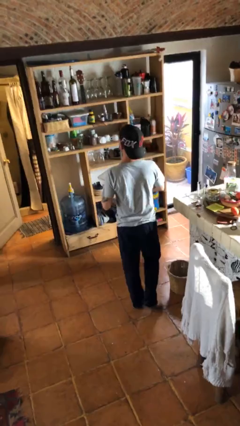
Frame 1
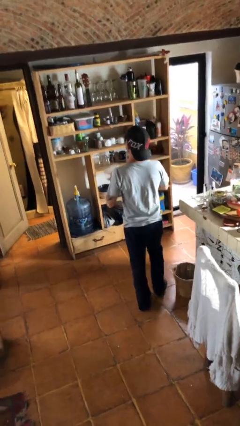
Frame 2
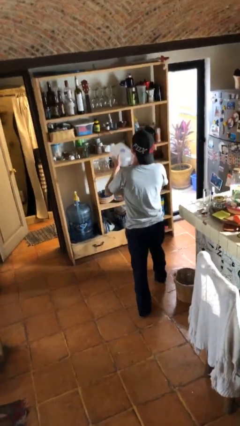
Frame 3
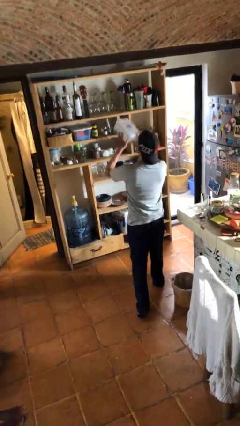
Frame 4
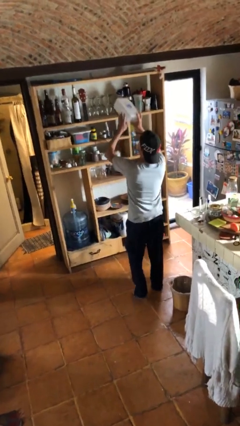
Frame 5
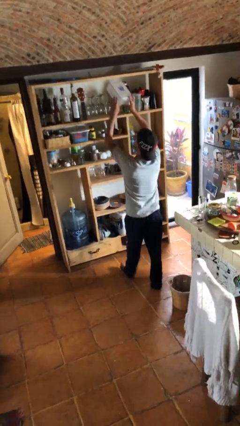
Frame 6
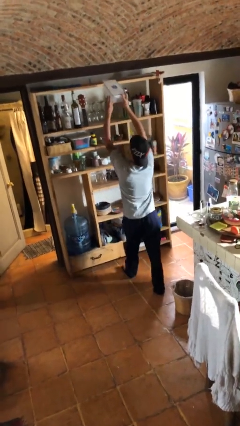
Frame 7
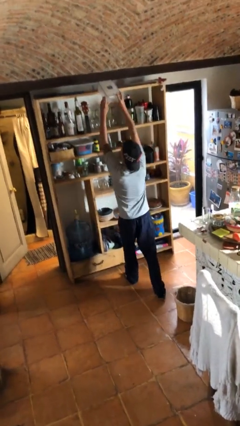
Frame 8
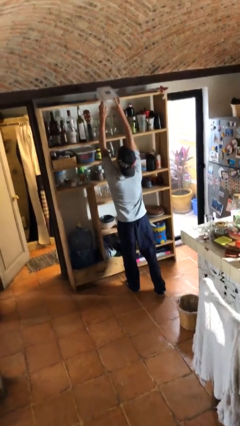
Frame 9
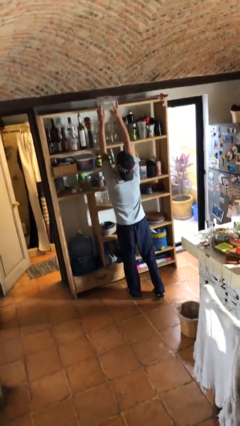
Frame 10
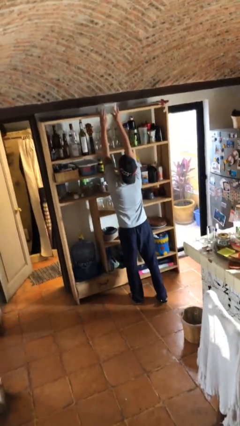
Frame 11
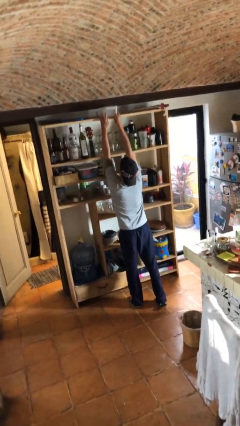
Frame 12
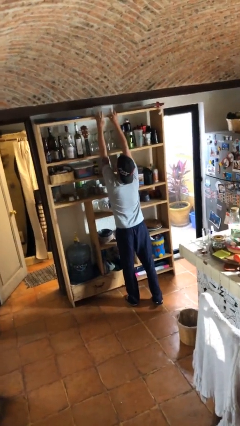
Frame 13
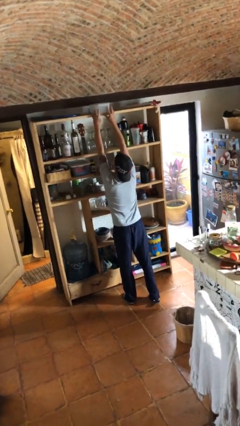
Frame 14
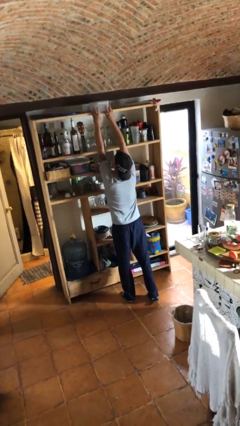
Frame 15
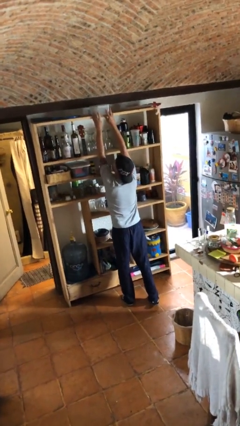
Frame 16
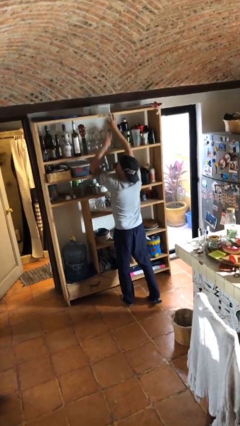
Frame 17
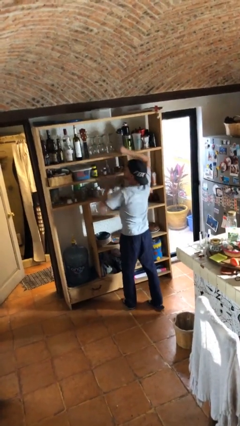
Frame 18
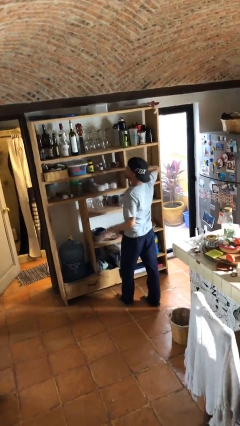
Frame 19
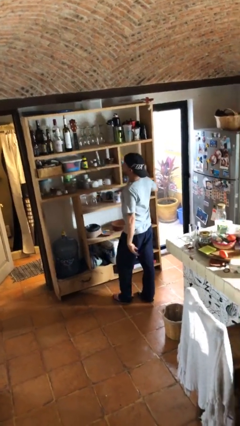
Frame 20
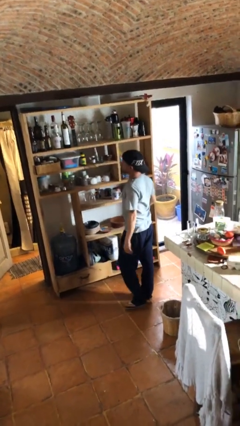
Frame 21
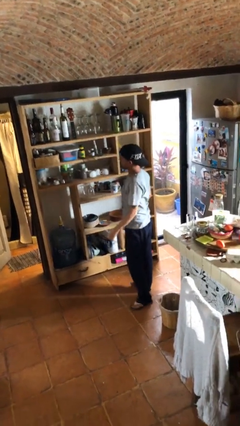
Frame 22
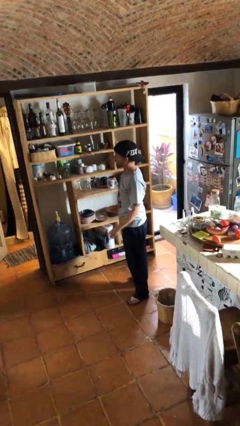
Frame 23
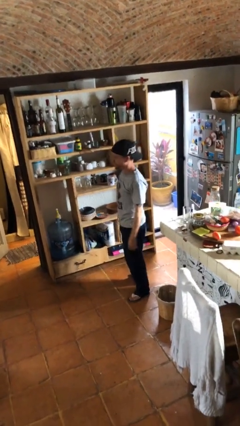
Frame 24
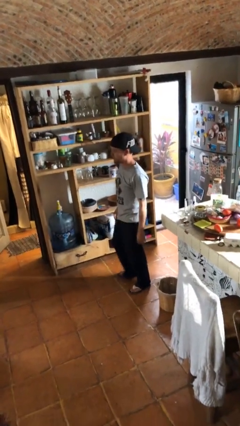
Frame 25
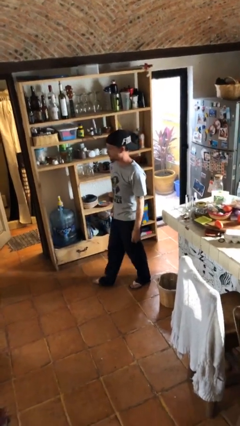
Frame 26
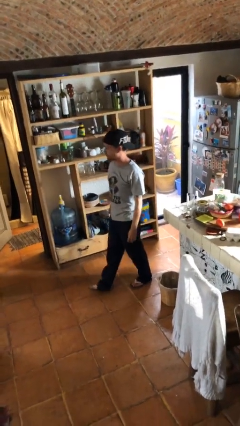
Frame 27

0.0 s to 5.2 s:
person puts down object on shelf

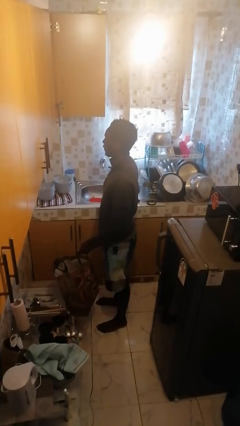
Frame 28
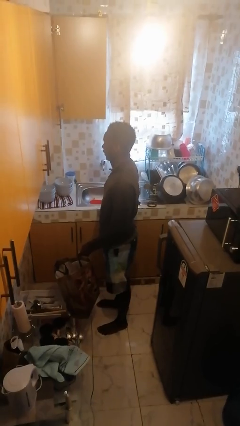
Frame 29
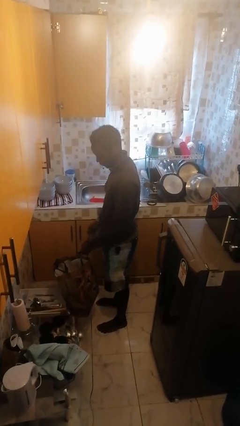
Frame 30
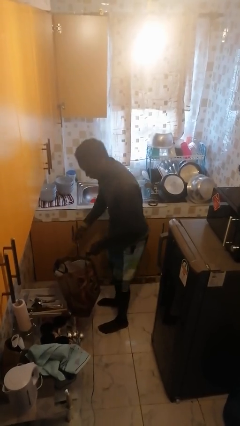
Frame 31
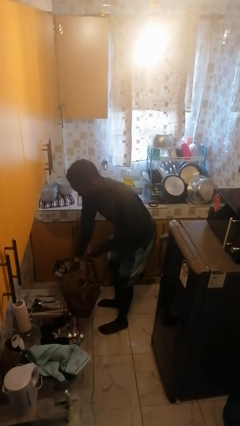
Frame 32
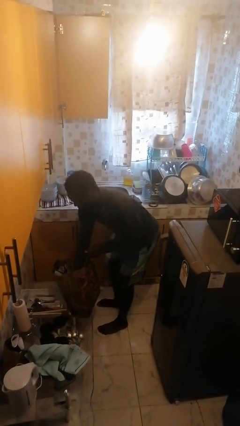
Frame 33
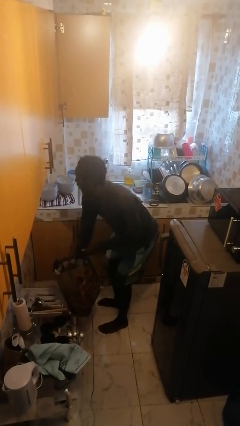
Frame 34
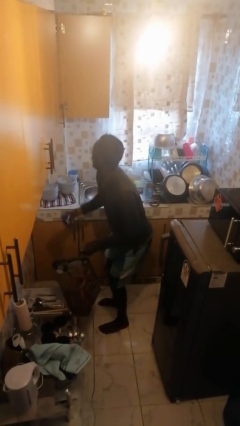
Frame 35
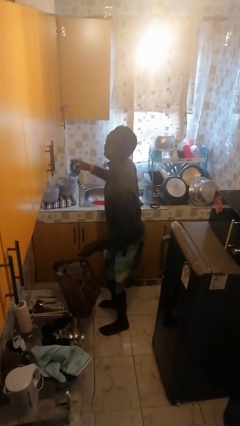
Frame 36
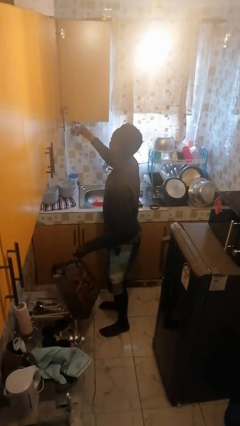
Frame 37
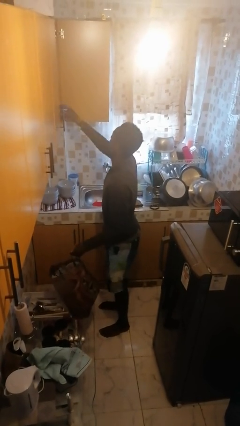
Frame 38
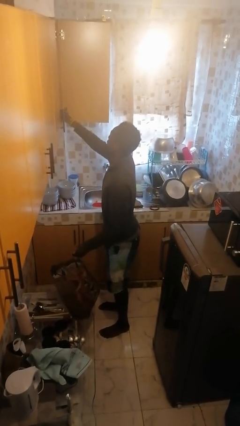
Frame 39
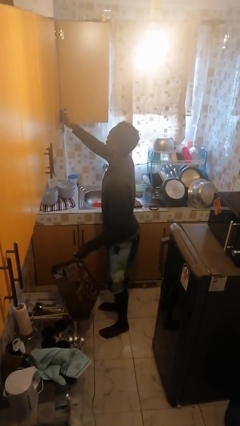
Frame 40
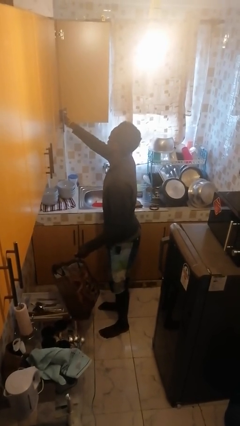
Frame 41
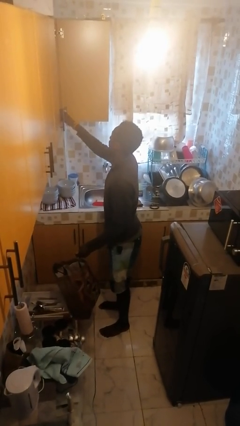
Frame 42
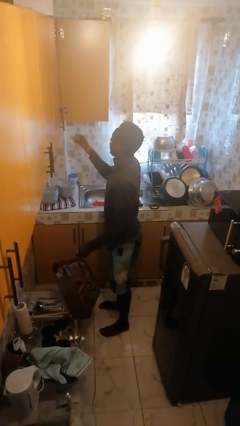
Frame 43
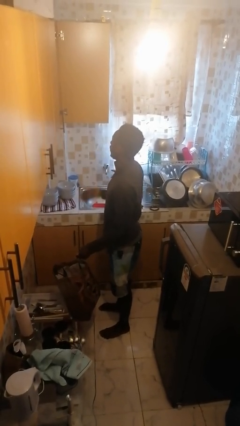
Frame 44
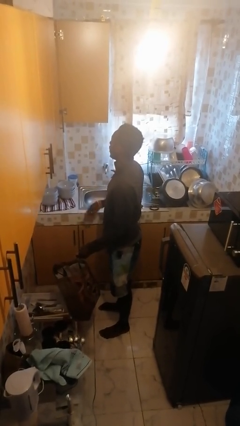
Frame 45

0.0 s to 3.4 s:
person loads groceries into cabinet

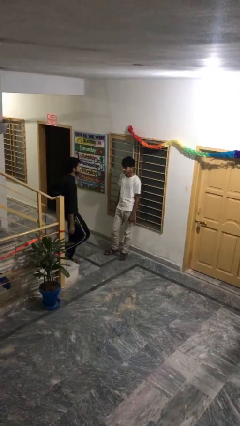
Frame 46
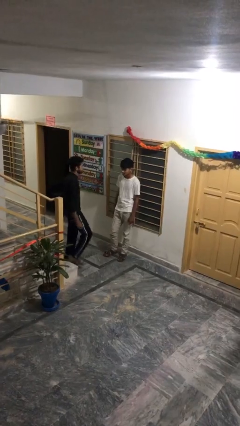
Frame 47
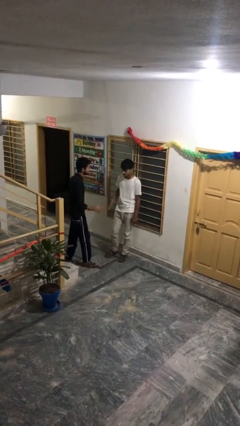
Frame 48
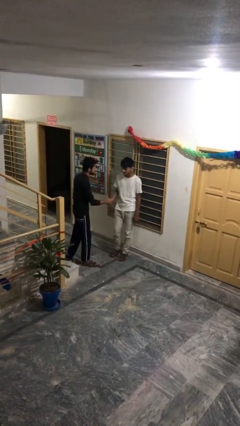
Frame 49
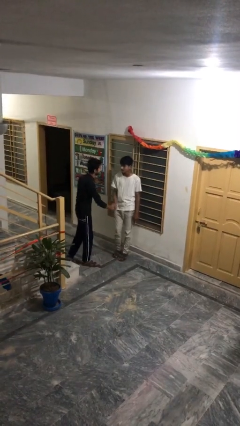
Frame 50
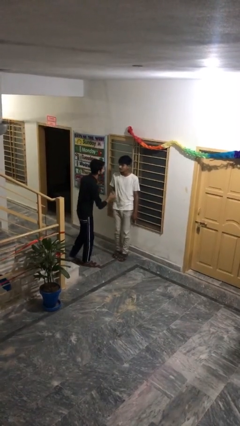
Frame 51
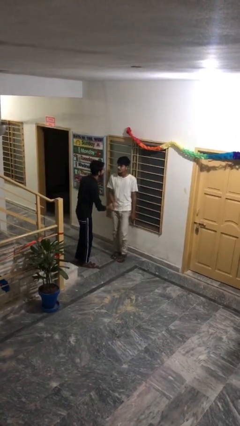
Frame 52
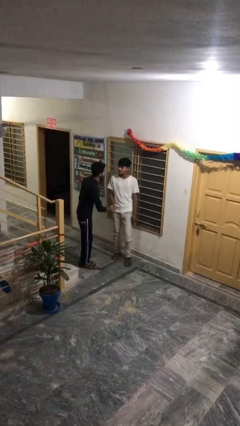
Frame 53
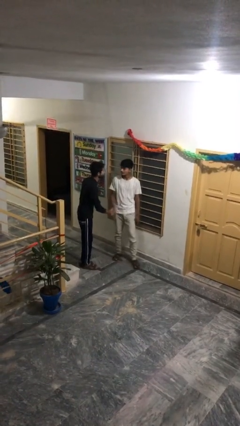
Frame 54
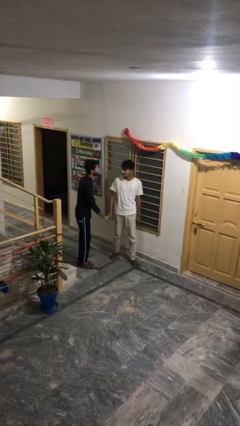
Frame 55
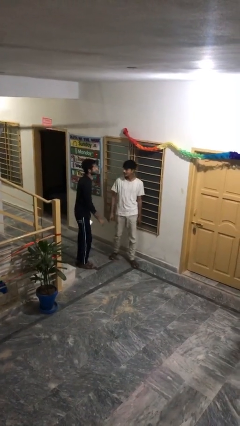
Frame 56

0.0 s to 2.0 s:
person shakes hand

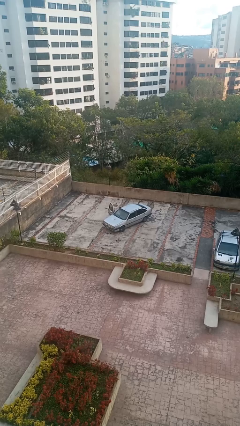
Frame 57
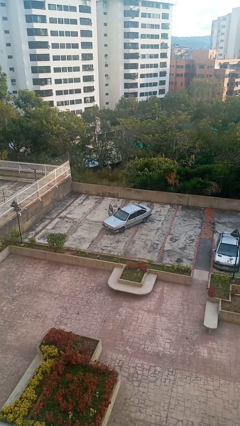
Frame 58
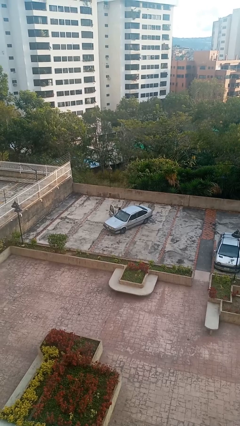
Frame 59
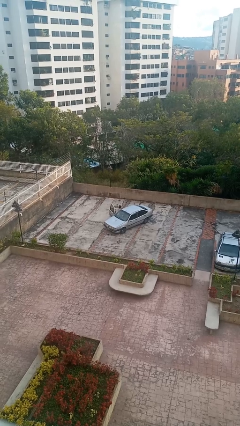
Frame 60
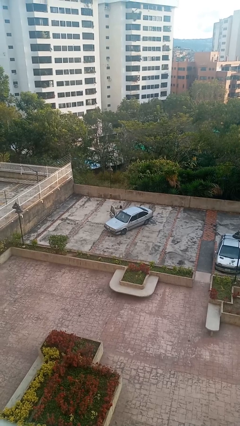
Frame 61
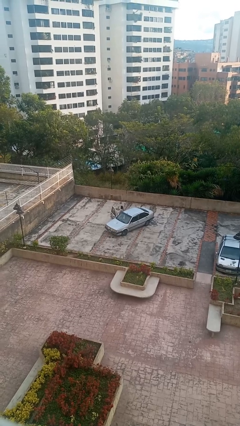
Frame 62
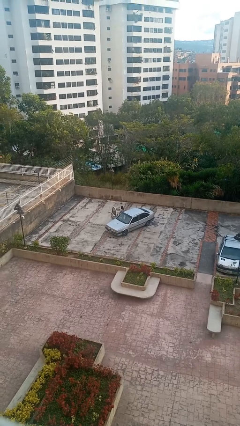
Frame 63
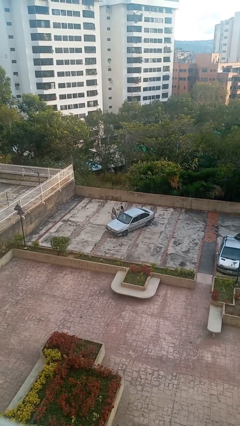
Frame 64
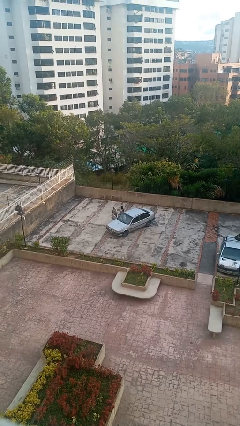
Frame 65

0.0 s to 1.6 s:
person exits car

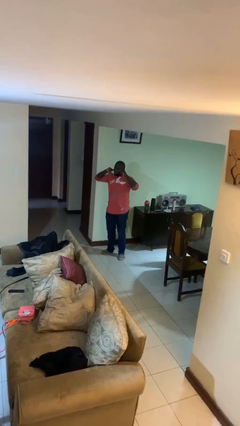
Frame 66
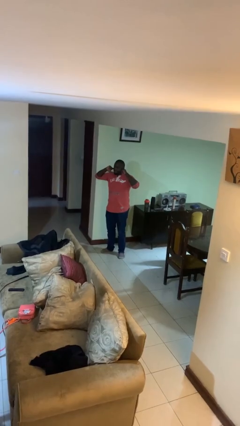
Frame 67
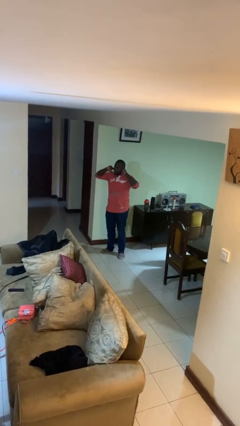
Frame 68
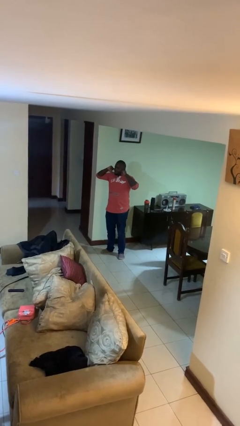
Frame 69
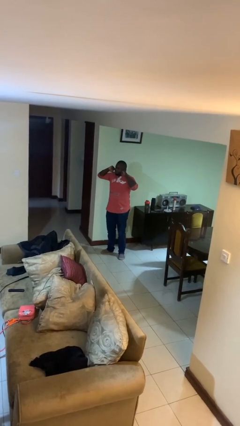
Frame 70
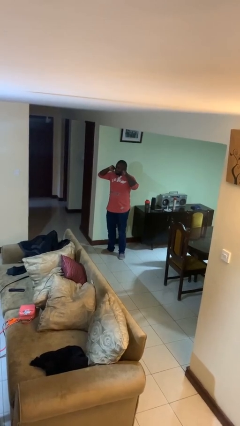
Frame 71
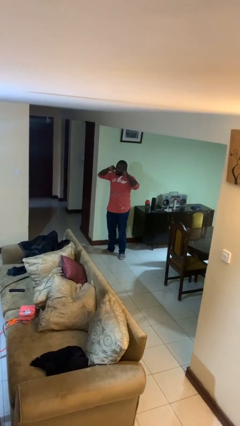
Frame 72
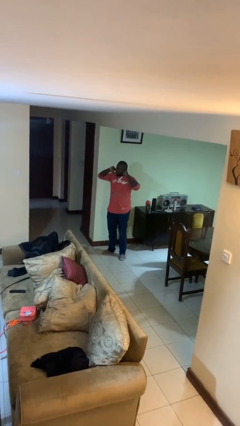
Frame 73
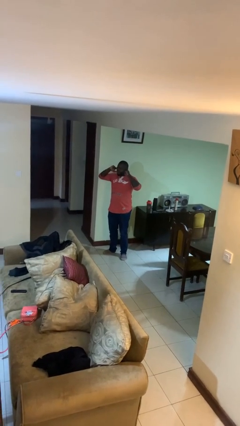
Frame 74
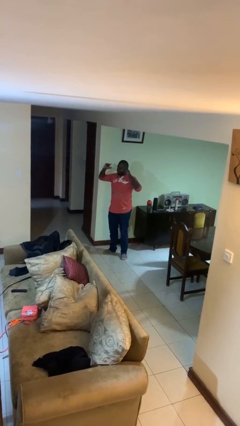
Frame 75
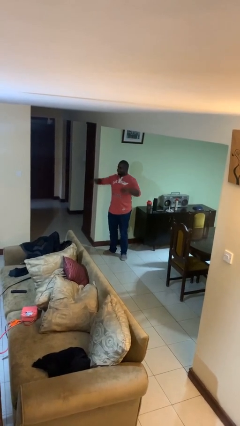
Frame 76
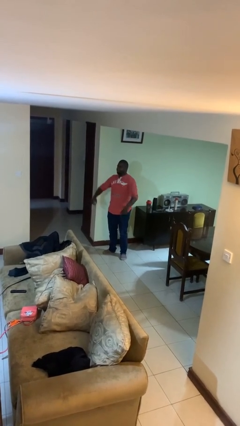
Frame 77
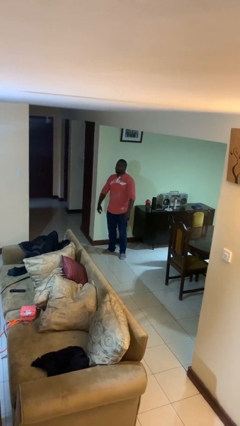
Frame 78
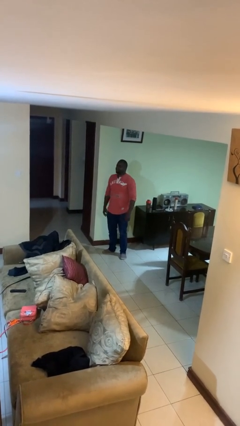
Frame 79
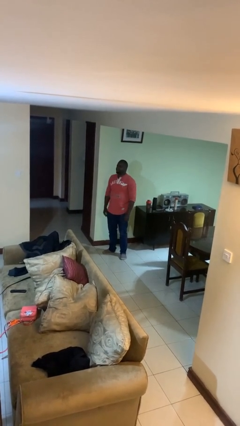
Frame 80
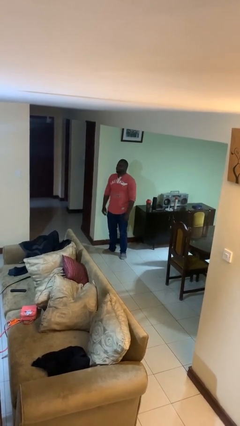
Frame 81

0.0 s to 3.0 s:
person puts fingers in ear

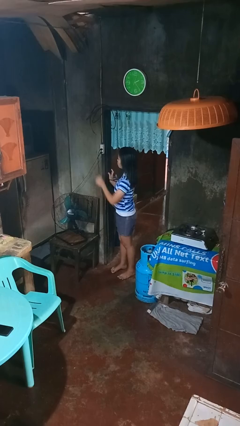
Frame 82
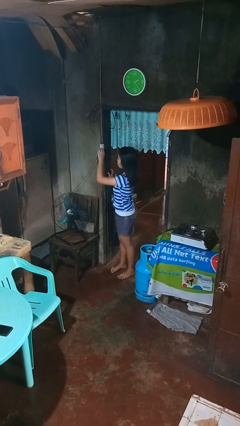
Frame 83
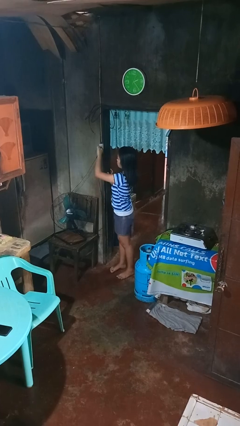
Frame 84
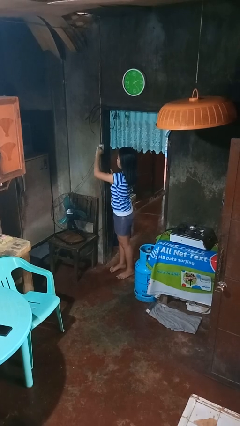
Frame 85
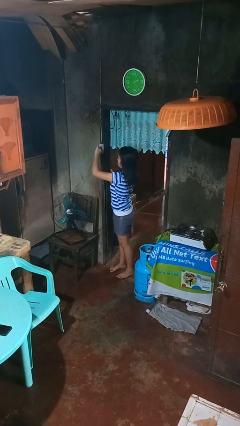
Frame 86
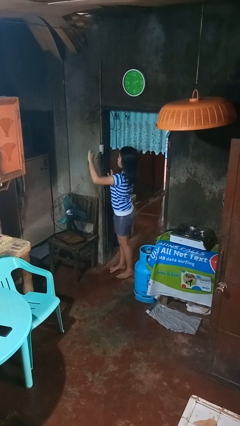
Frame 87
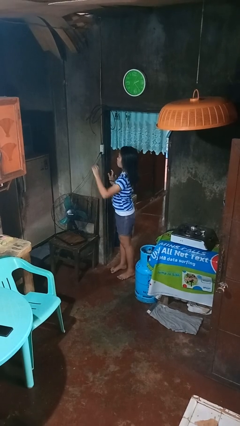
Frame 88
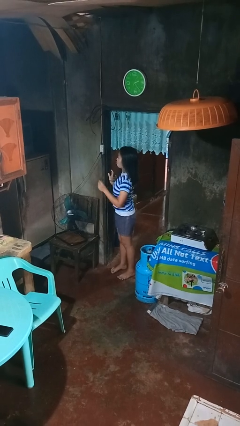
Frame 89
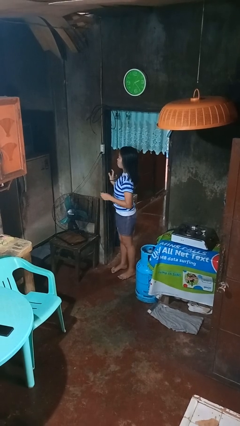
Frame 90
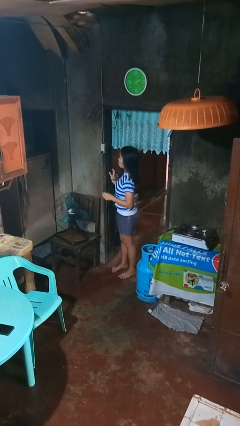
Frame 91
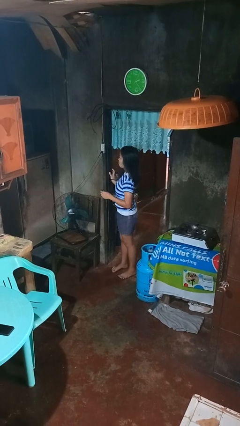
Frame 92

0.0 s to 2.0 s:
person unplugs from electrical socket

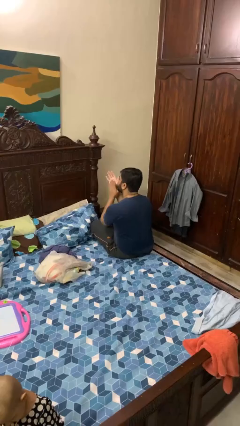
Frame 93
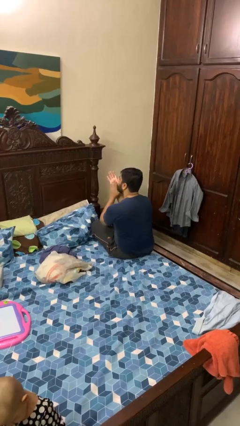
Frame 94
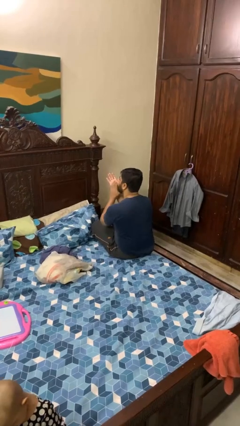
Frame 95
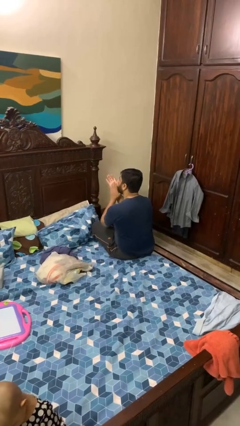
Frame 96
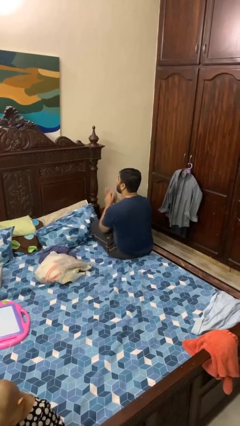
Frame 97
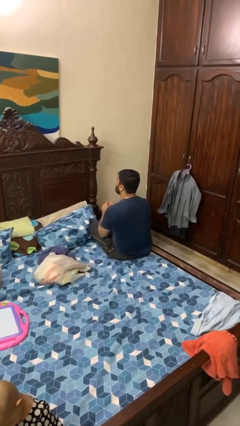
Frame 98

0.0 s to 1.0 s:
person claps hands
